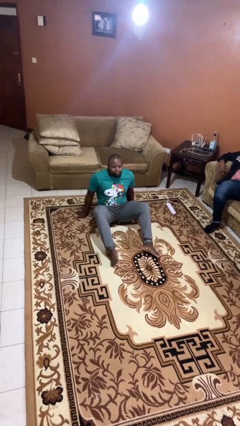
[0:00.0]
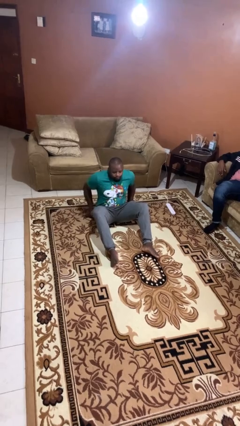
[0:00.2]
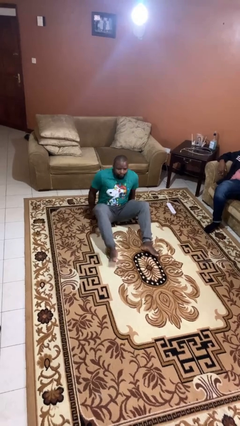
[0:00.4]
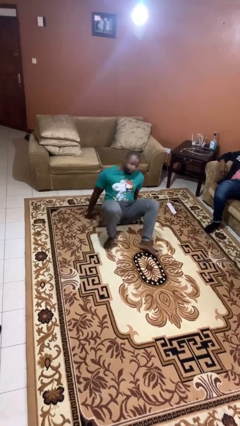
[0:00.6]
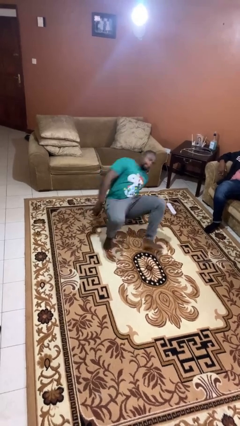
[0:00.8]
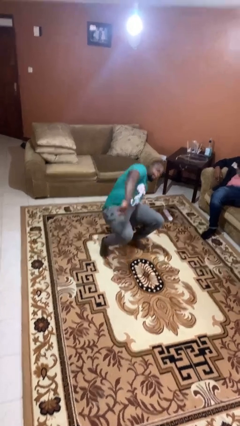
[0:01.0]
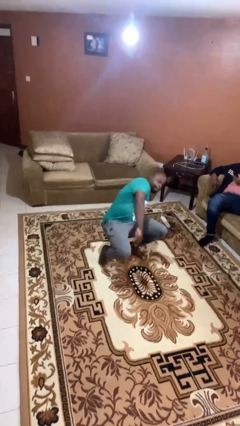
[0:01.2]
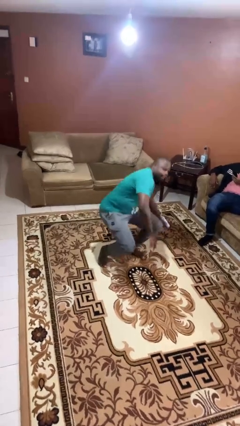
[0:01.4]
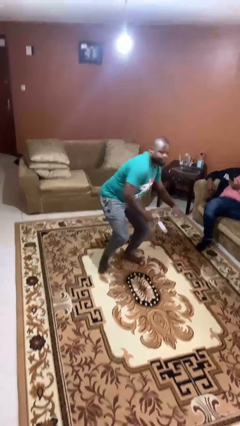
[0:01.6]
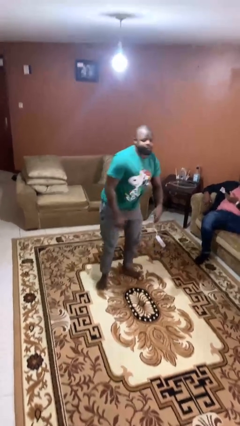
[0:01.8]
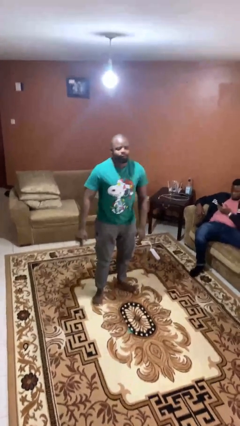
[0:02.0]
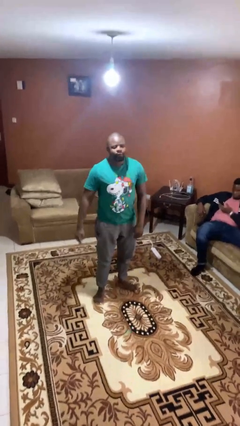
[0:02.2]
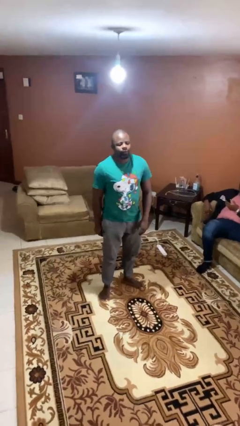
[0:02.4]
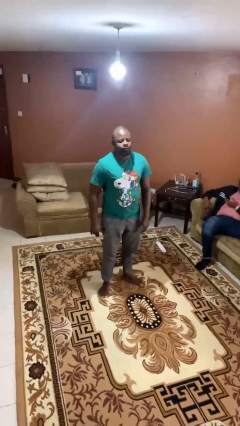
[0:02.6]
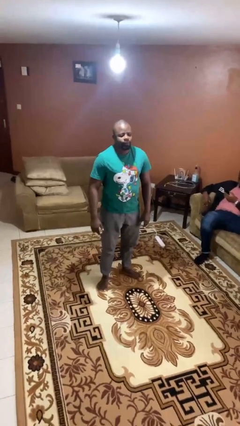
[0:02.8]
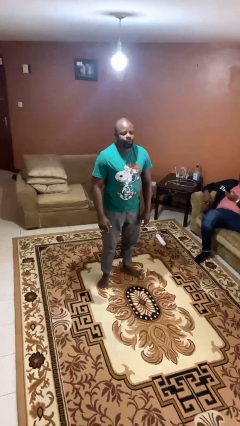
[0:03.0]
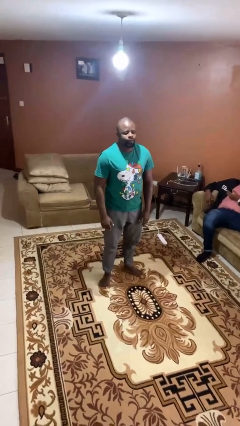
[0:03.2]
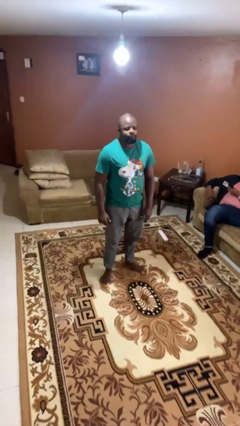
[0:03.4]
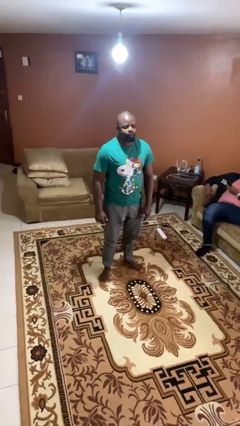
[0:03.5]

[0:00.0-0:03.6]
person stands up

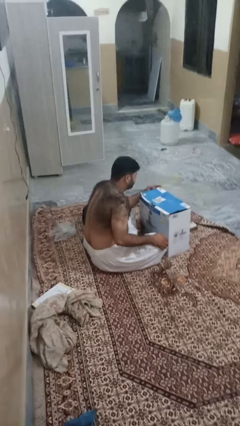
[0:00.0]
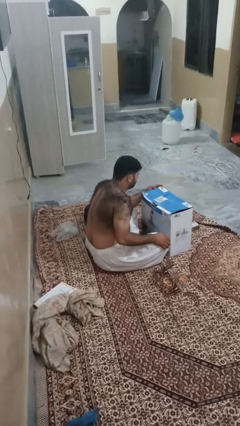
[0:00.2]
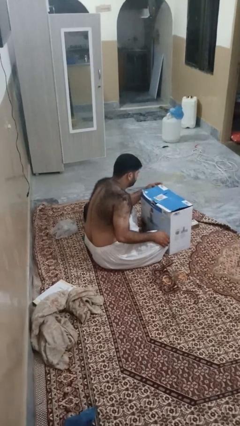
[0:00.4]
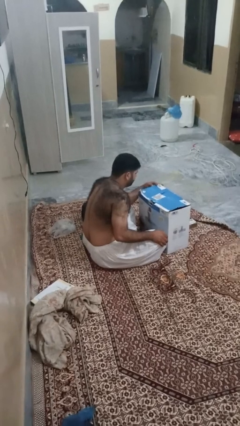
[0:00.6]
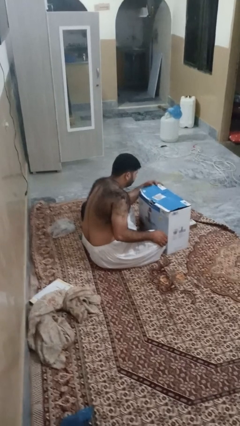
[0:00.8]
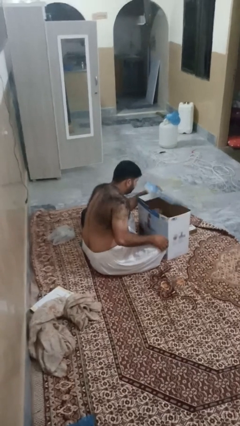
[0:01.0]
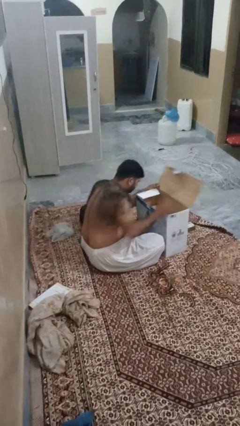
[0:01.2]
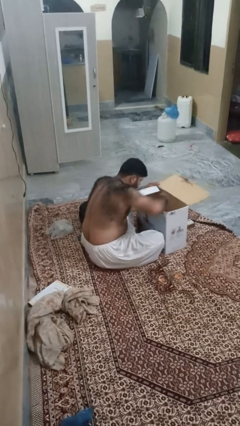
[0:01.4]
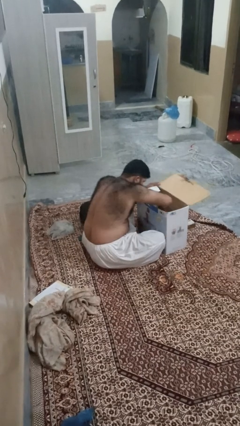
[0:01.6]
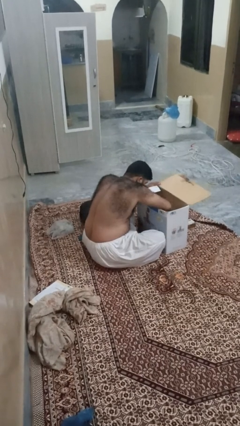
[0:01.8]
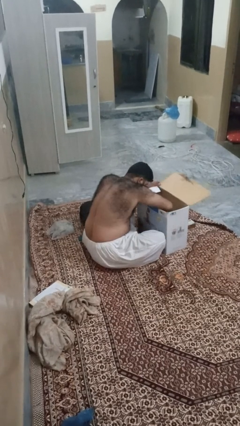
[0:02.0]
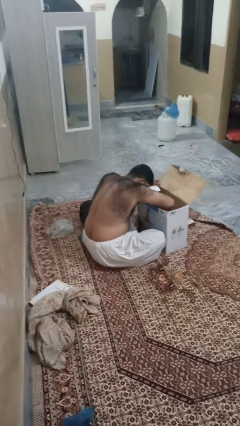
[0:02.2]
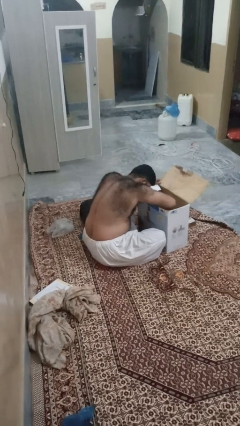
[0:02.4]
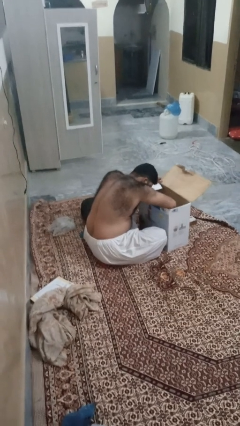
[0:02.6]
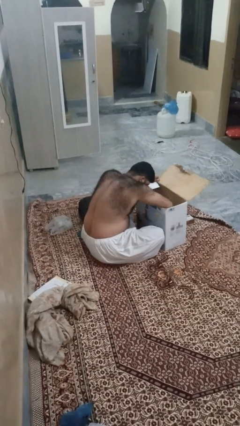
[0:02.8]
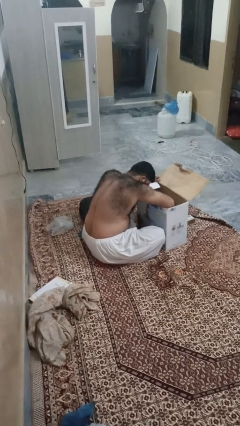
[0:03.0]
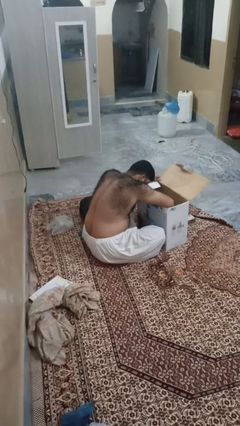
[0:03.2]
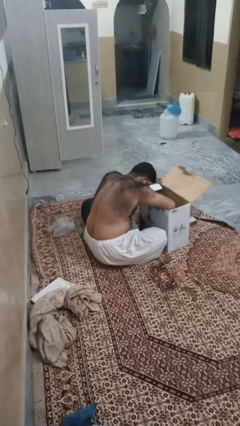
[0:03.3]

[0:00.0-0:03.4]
person searches in box

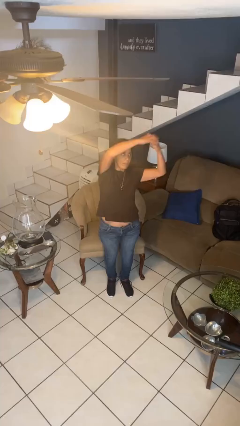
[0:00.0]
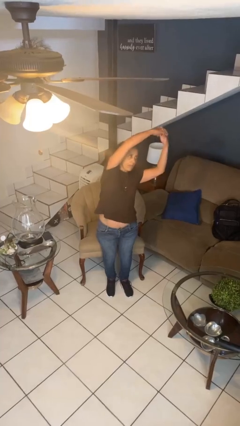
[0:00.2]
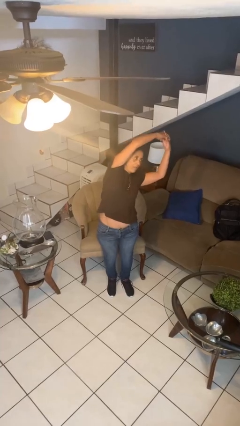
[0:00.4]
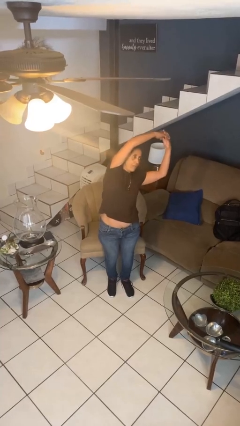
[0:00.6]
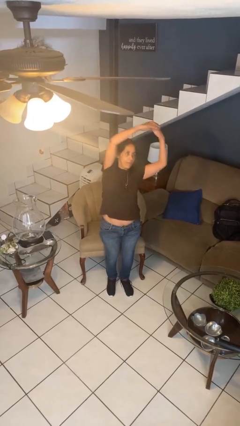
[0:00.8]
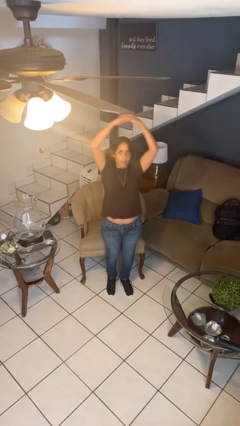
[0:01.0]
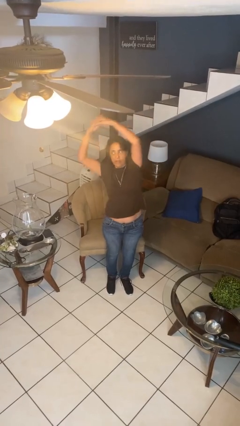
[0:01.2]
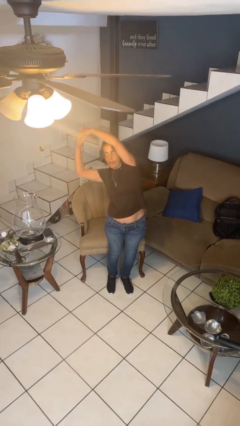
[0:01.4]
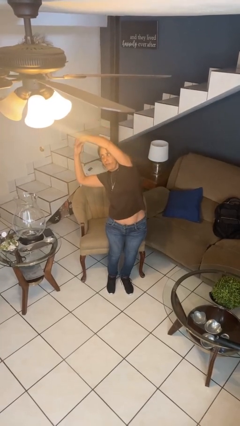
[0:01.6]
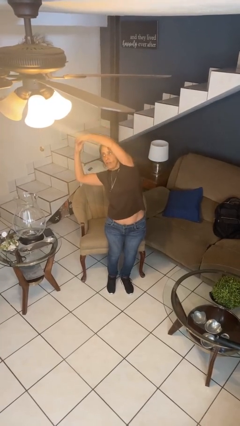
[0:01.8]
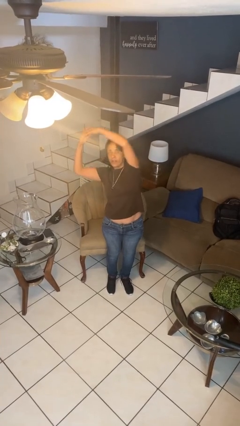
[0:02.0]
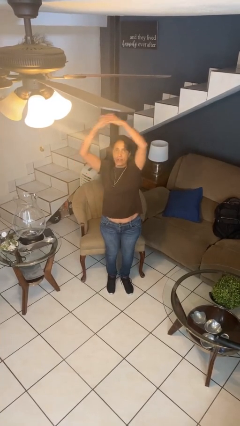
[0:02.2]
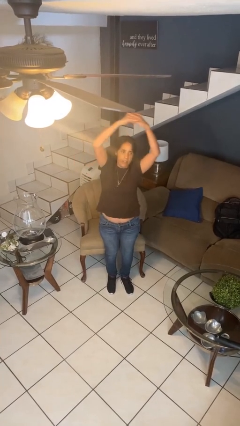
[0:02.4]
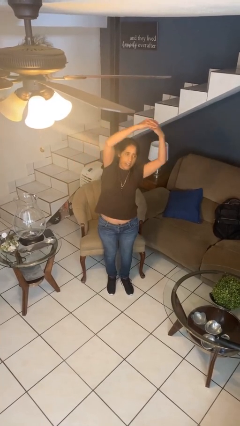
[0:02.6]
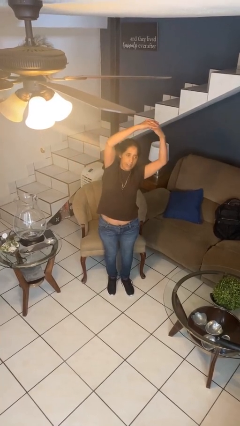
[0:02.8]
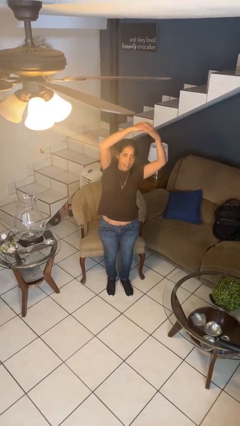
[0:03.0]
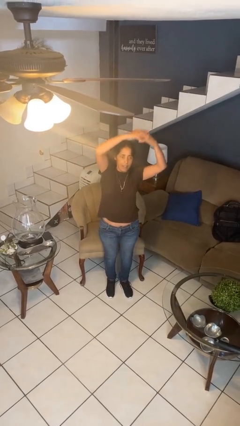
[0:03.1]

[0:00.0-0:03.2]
person stretches arms over head

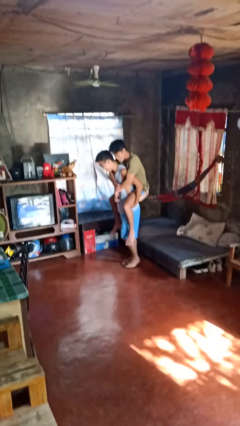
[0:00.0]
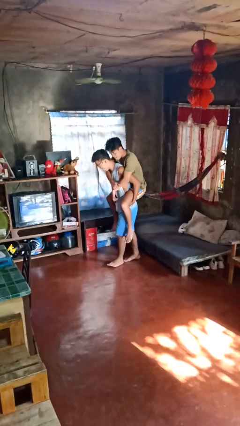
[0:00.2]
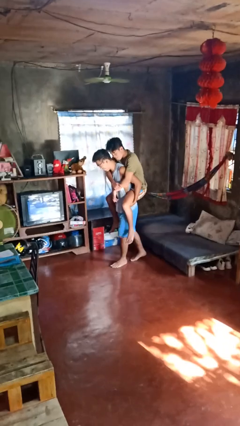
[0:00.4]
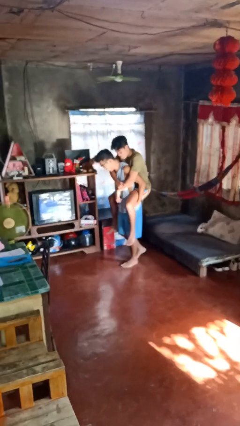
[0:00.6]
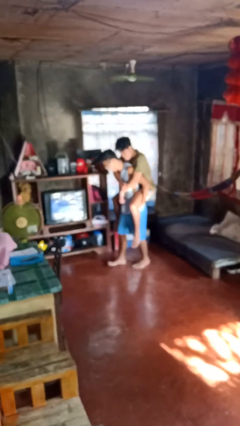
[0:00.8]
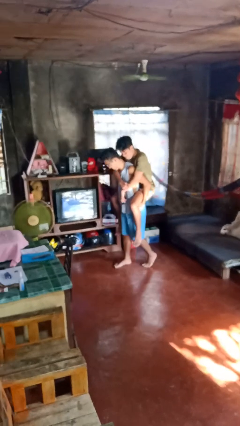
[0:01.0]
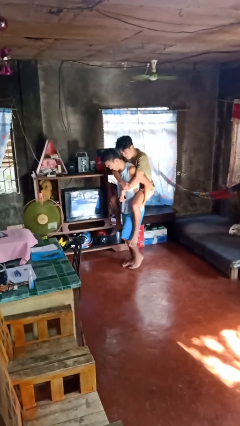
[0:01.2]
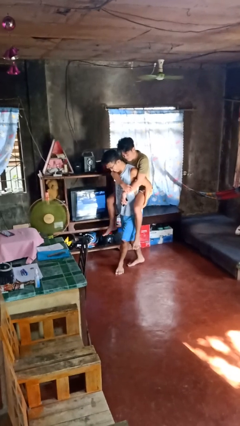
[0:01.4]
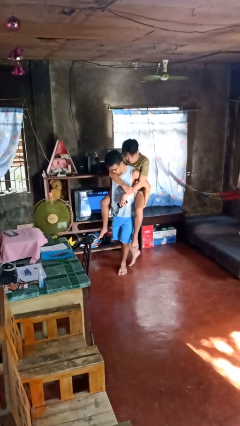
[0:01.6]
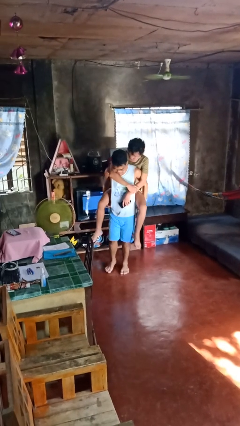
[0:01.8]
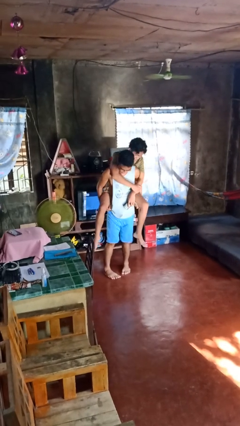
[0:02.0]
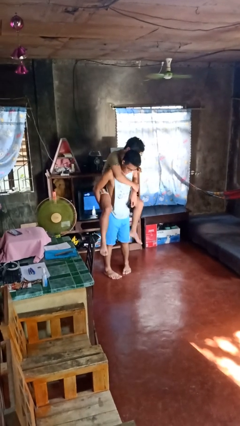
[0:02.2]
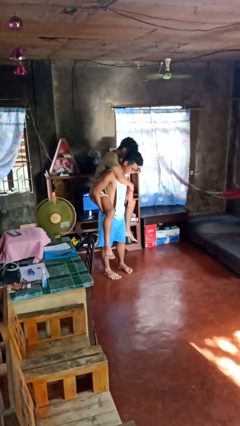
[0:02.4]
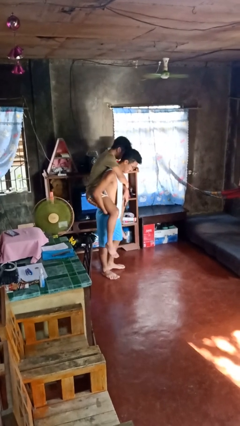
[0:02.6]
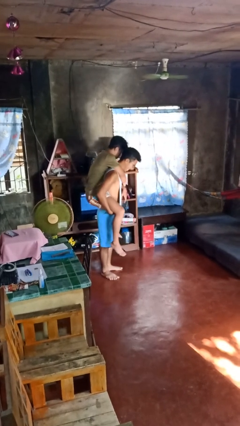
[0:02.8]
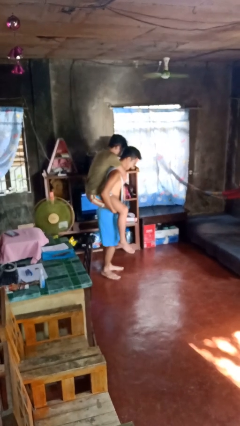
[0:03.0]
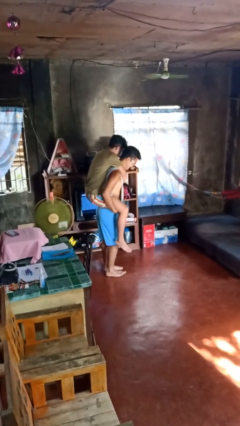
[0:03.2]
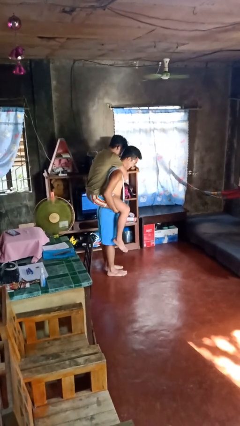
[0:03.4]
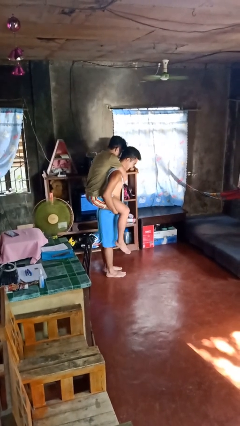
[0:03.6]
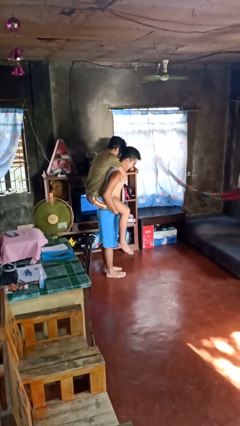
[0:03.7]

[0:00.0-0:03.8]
person carries person on back

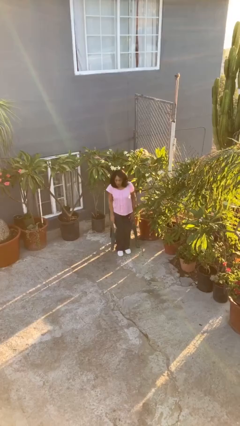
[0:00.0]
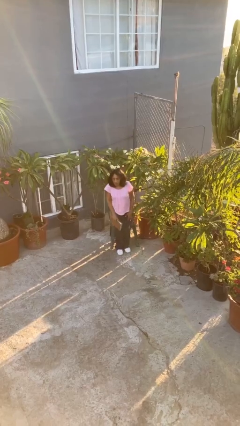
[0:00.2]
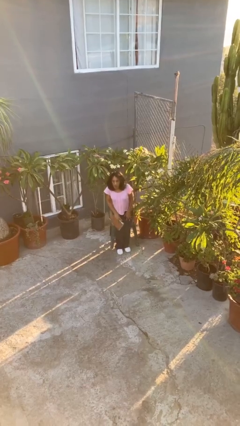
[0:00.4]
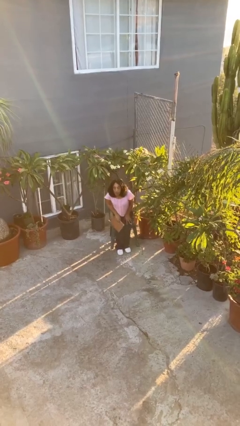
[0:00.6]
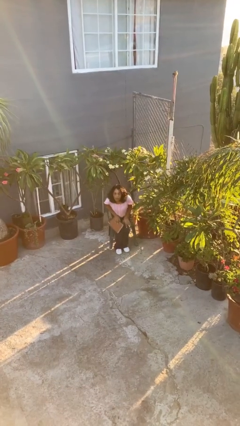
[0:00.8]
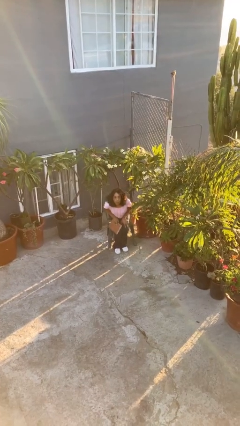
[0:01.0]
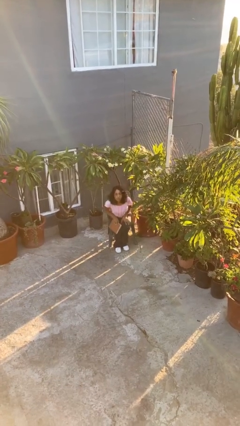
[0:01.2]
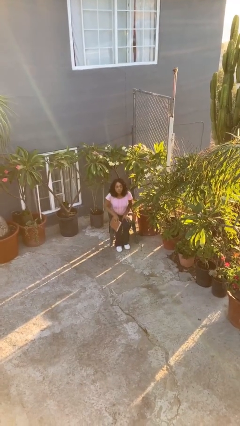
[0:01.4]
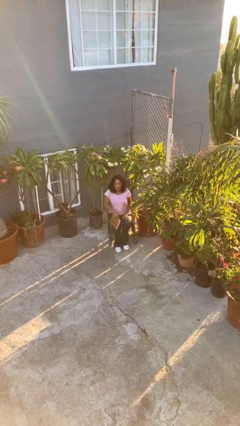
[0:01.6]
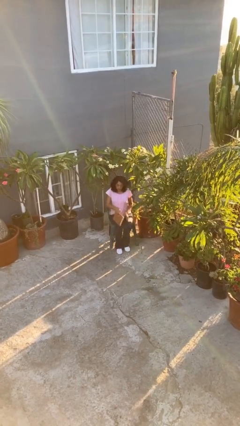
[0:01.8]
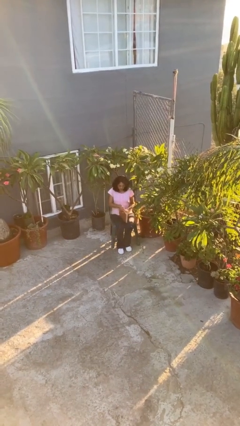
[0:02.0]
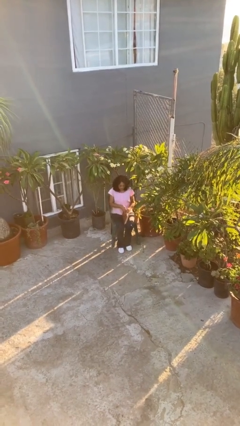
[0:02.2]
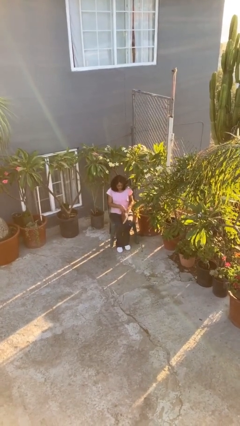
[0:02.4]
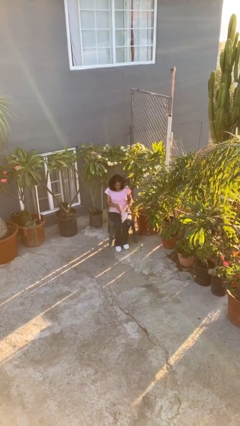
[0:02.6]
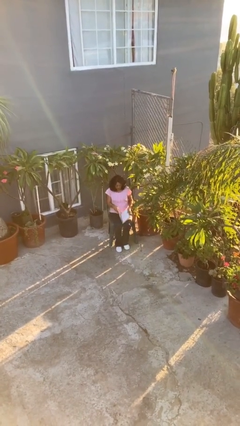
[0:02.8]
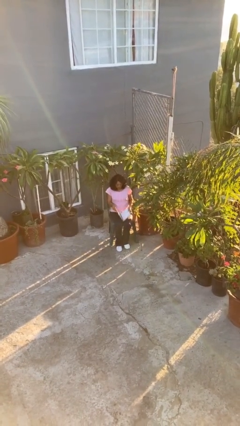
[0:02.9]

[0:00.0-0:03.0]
person sits down

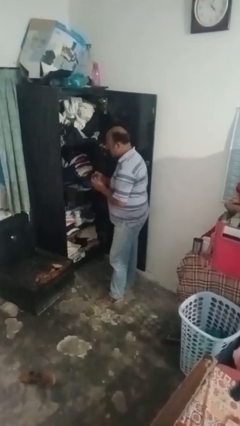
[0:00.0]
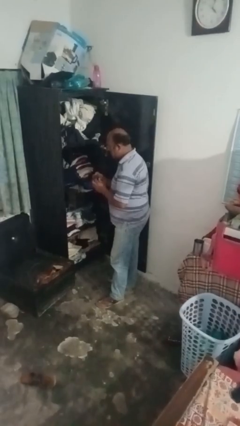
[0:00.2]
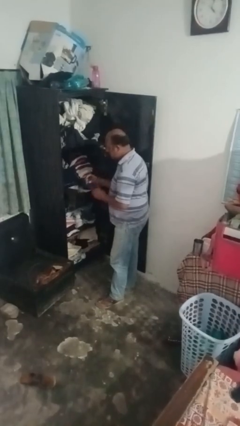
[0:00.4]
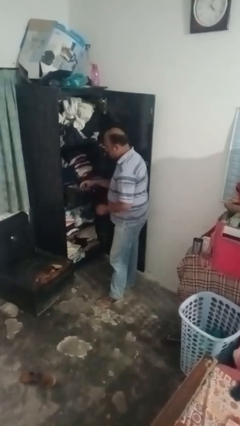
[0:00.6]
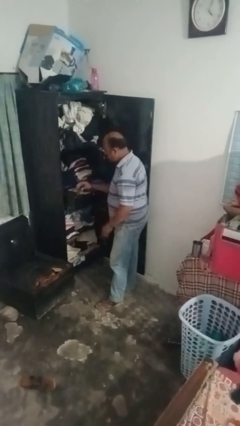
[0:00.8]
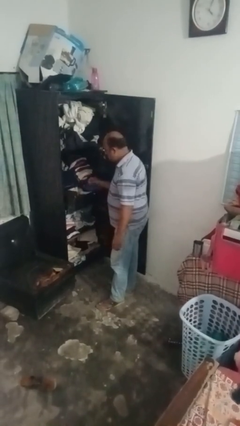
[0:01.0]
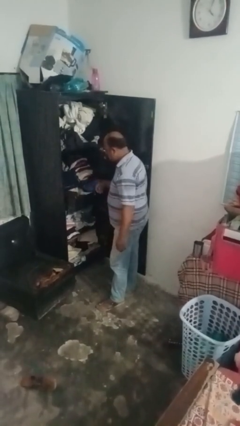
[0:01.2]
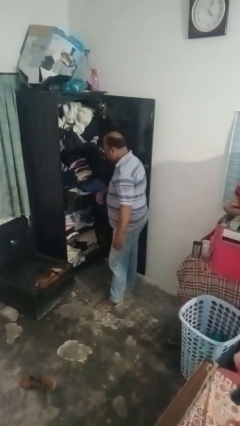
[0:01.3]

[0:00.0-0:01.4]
person takes clothes from dresser
